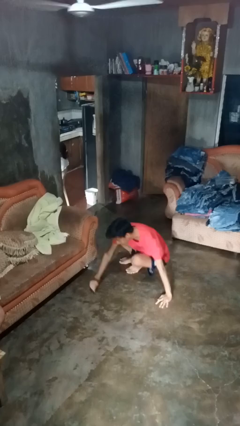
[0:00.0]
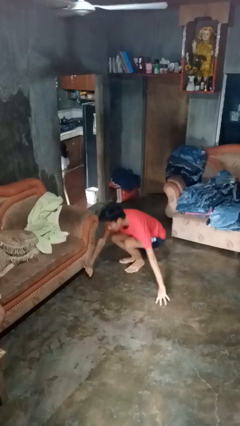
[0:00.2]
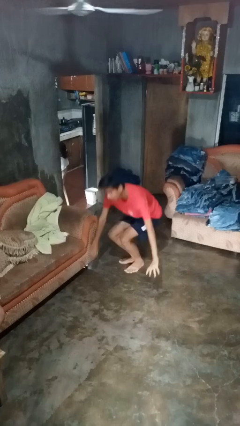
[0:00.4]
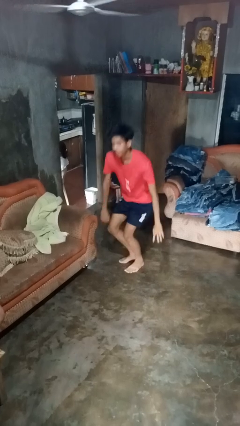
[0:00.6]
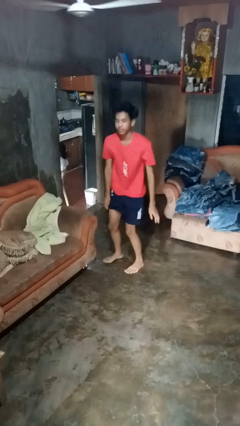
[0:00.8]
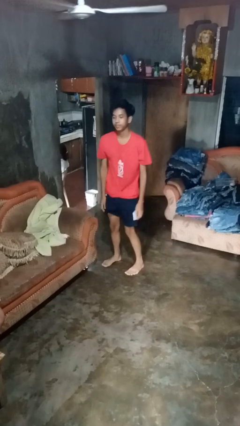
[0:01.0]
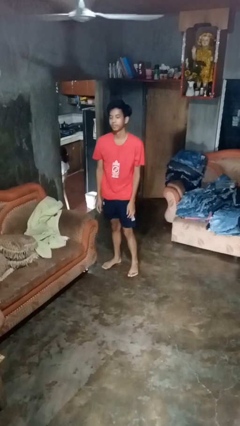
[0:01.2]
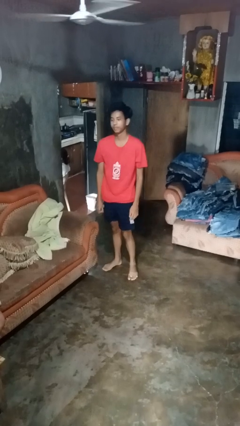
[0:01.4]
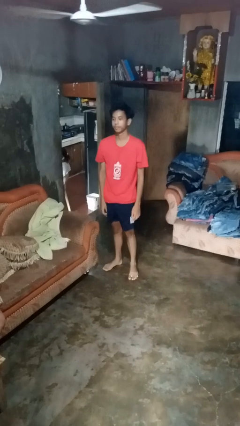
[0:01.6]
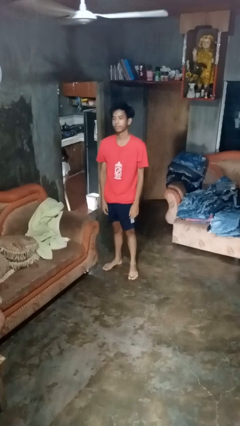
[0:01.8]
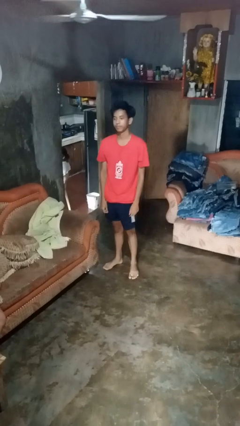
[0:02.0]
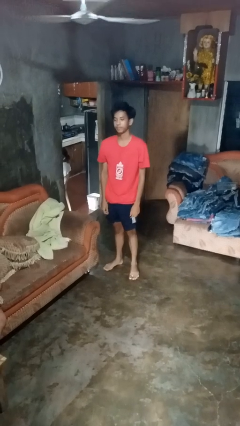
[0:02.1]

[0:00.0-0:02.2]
person stands up from floor

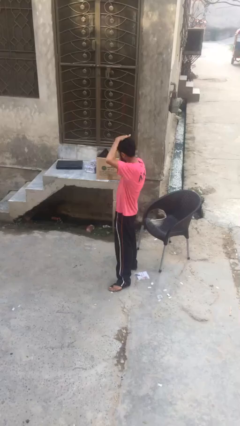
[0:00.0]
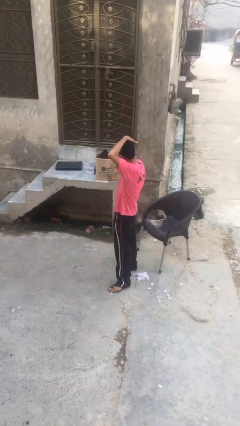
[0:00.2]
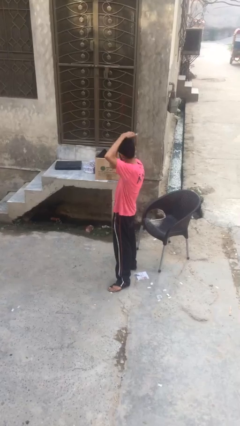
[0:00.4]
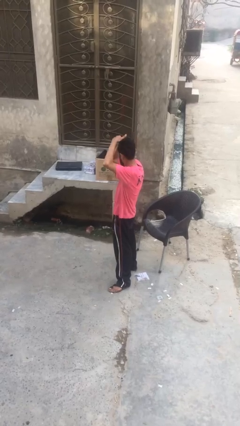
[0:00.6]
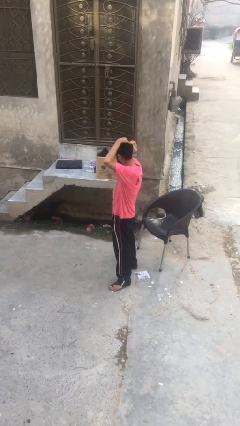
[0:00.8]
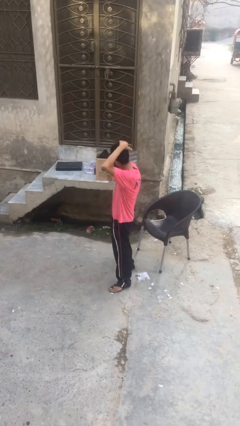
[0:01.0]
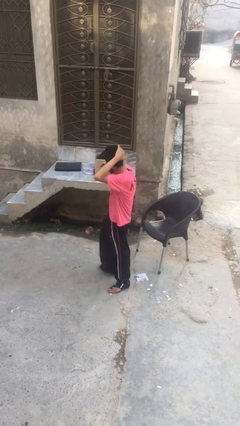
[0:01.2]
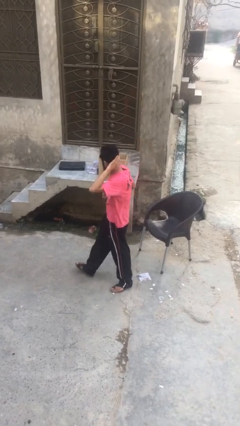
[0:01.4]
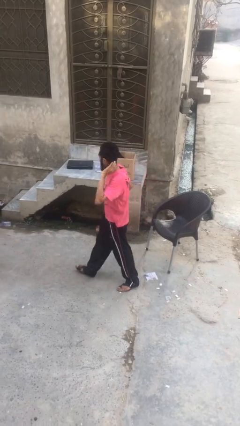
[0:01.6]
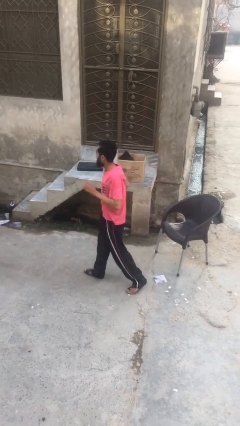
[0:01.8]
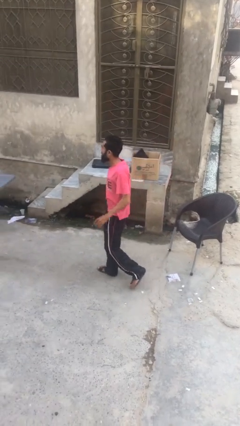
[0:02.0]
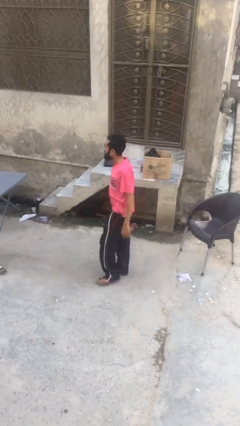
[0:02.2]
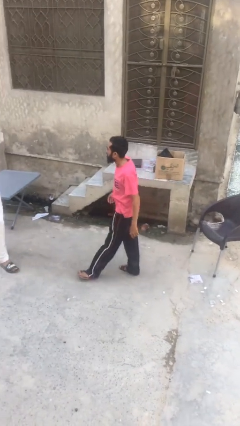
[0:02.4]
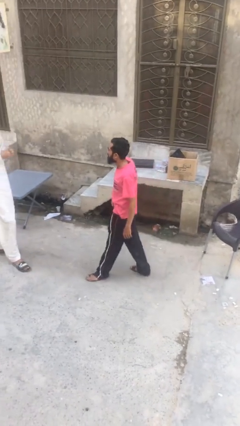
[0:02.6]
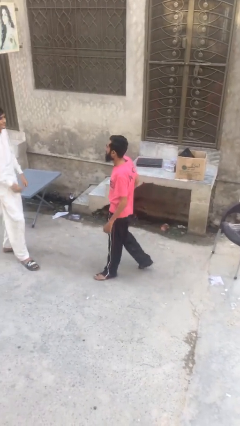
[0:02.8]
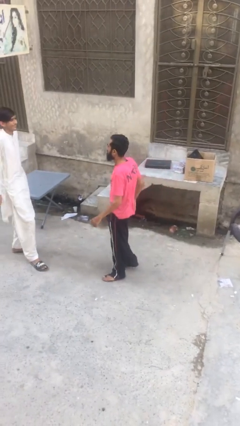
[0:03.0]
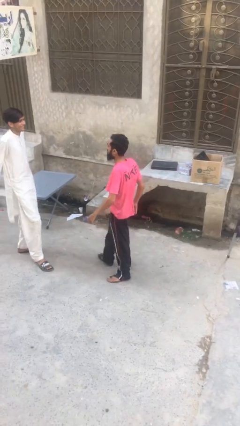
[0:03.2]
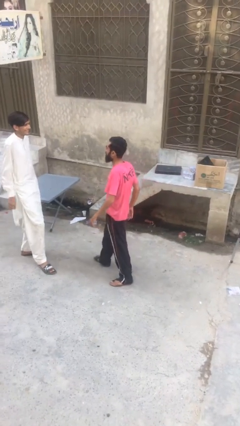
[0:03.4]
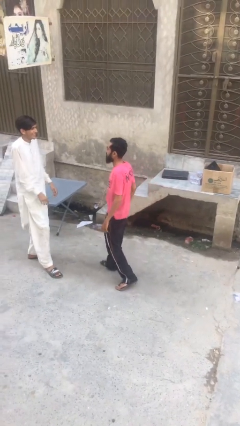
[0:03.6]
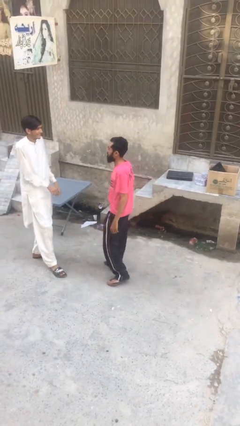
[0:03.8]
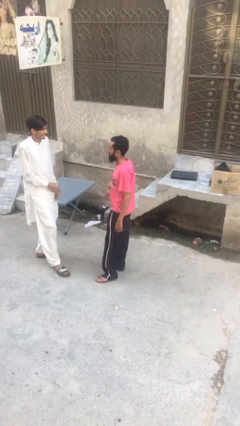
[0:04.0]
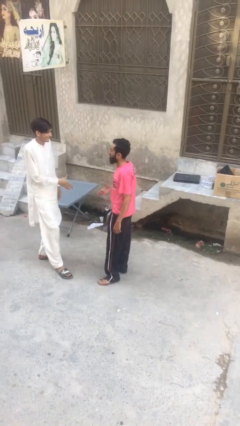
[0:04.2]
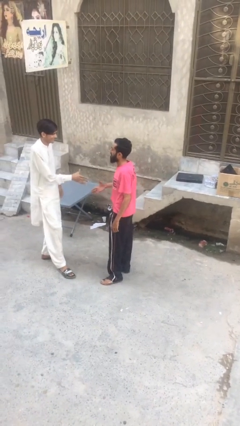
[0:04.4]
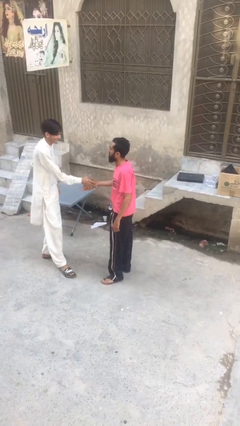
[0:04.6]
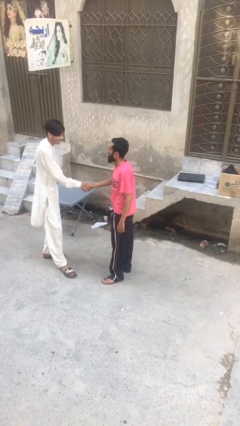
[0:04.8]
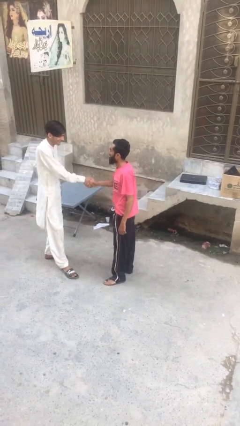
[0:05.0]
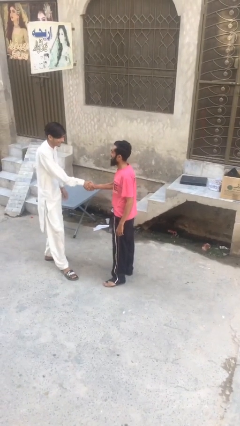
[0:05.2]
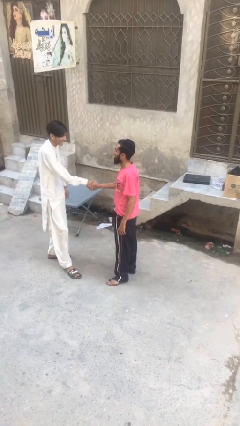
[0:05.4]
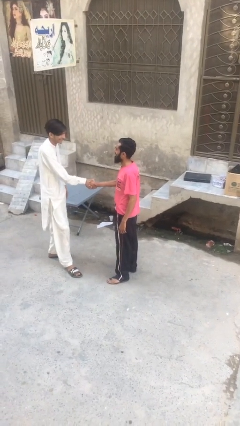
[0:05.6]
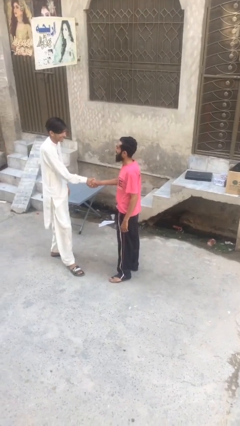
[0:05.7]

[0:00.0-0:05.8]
person shakes hand

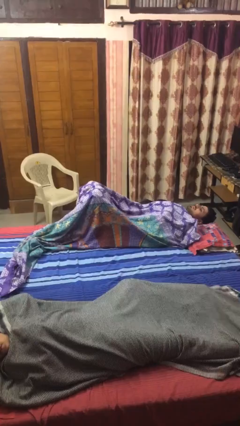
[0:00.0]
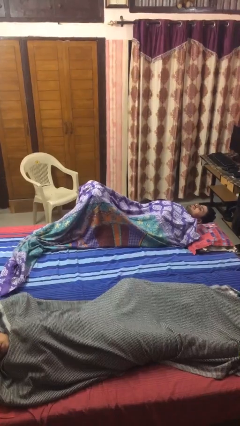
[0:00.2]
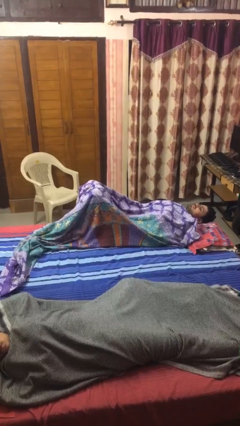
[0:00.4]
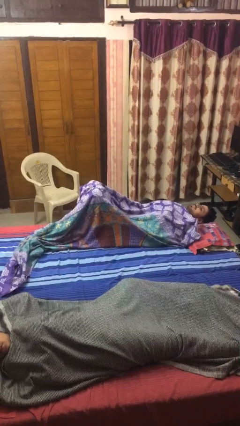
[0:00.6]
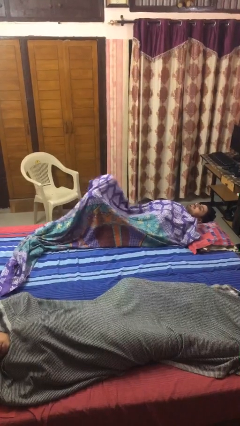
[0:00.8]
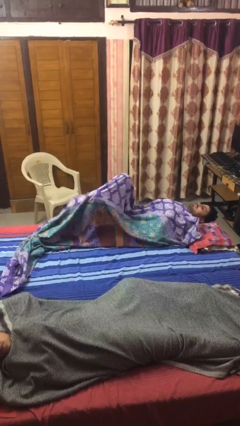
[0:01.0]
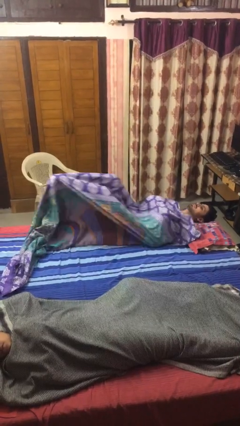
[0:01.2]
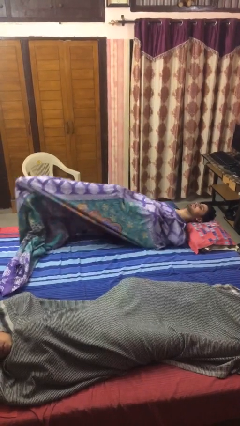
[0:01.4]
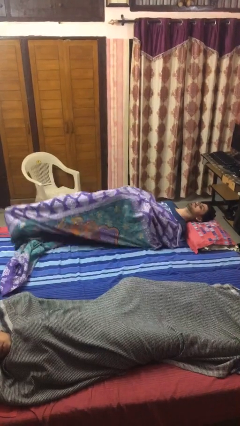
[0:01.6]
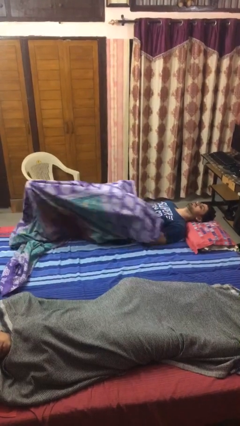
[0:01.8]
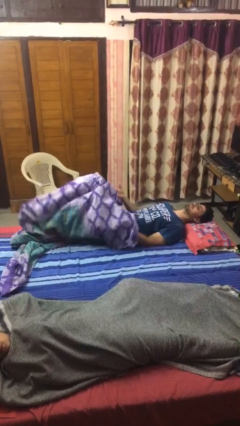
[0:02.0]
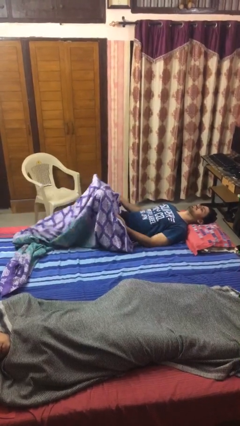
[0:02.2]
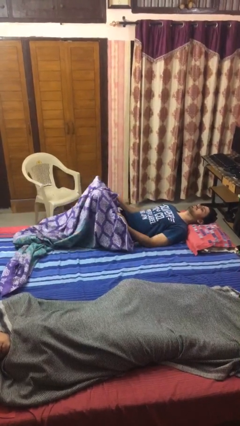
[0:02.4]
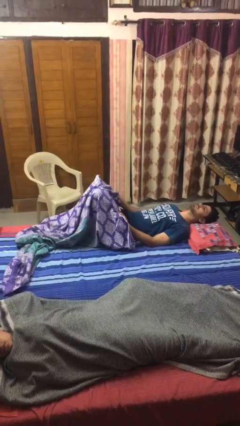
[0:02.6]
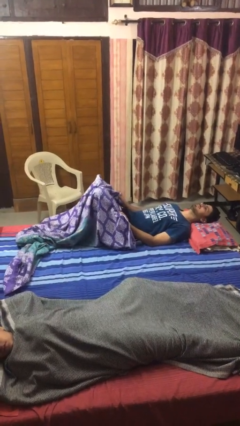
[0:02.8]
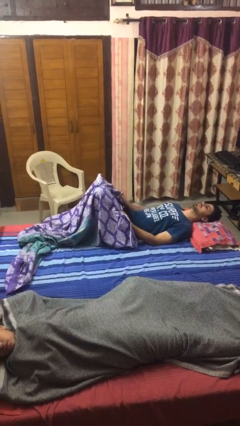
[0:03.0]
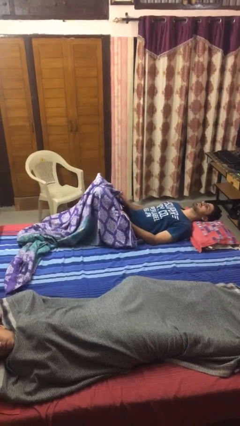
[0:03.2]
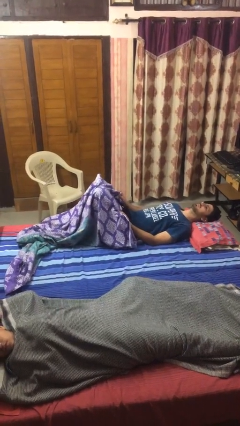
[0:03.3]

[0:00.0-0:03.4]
person uncovers with bedsheets

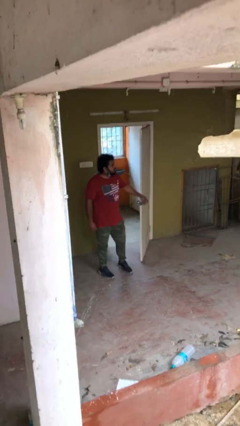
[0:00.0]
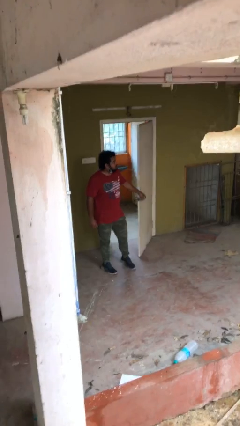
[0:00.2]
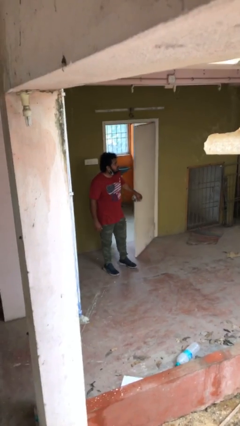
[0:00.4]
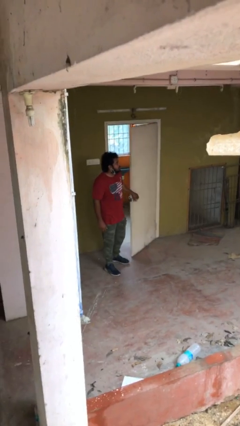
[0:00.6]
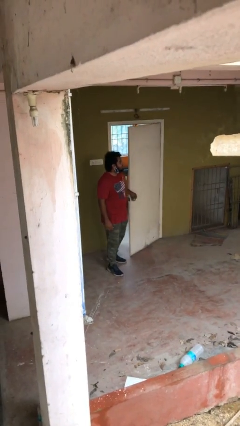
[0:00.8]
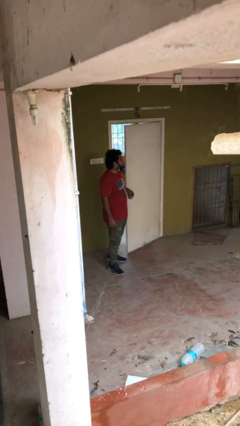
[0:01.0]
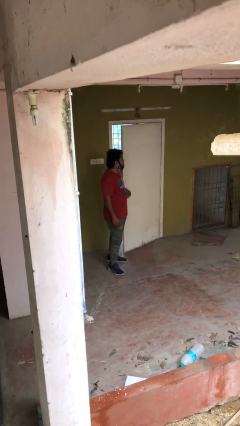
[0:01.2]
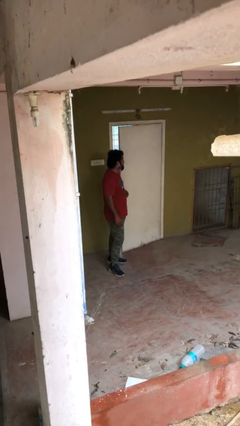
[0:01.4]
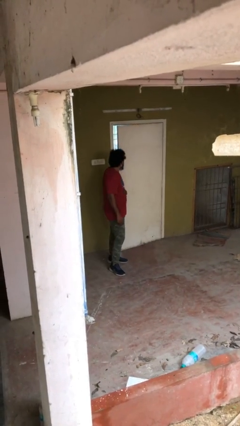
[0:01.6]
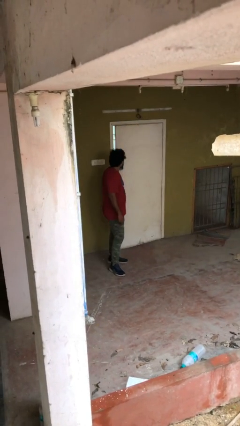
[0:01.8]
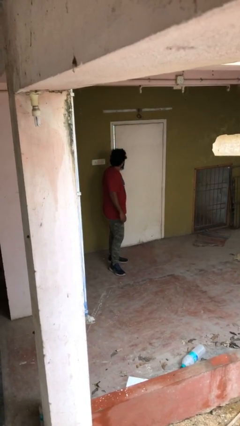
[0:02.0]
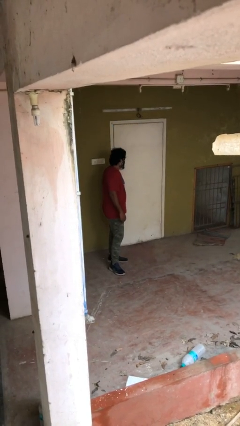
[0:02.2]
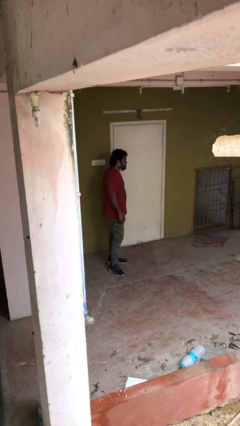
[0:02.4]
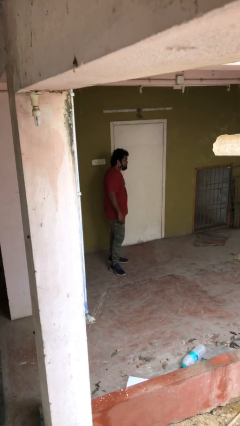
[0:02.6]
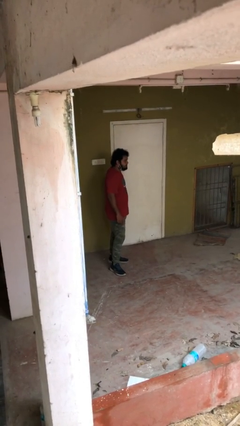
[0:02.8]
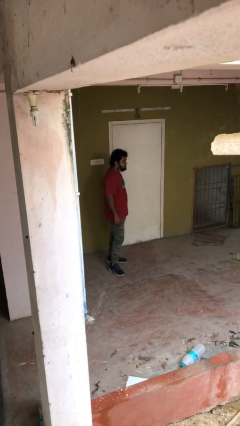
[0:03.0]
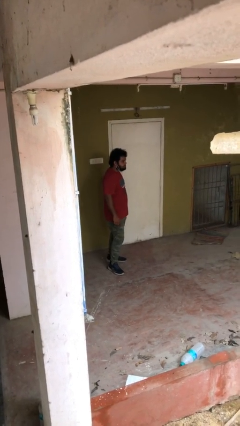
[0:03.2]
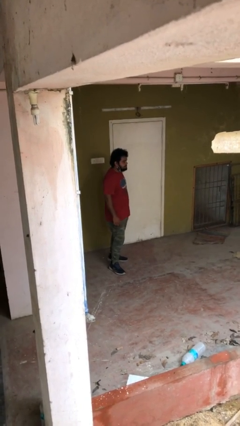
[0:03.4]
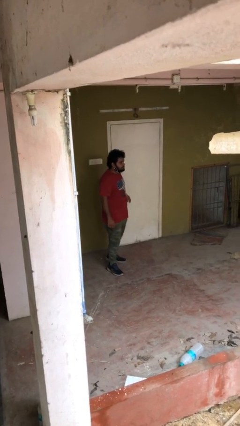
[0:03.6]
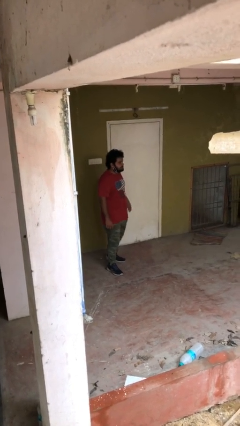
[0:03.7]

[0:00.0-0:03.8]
person closes facility door

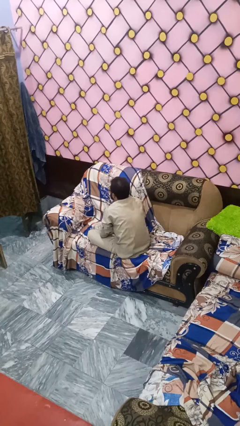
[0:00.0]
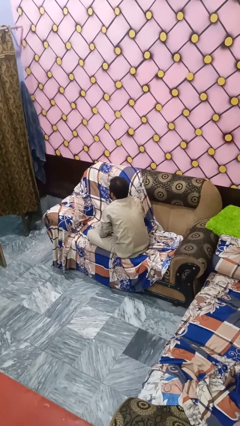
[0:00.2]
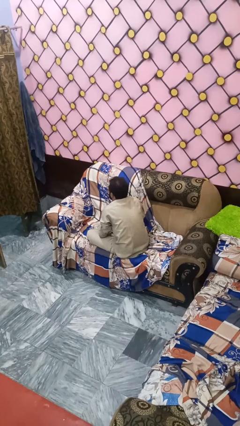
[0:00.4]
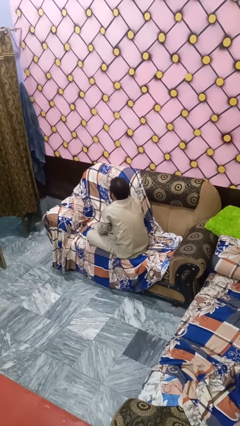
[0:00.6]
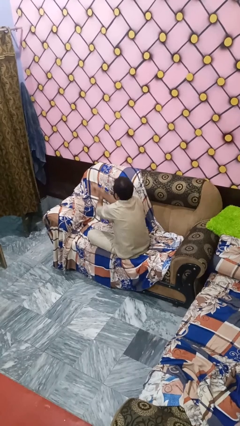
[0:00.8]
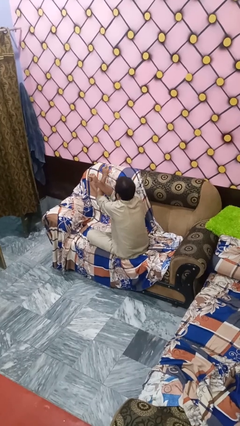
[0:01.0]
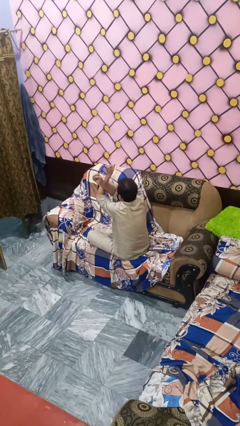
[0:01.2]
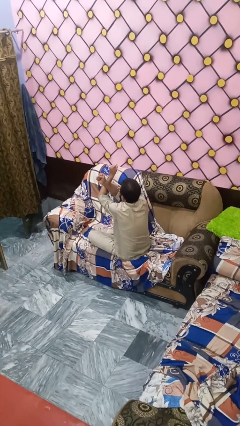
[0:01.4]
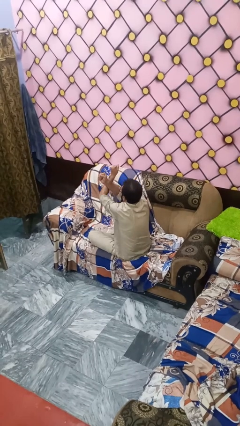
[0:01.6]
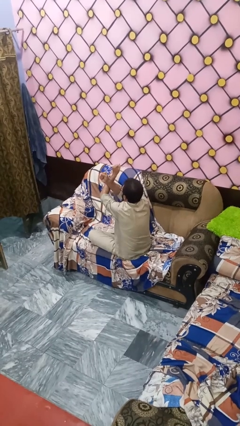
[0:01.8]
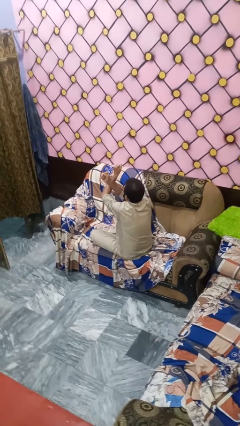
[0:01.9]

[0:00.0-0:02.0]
person gestures arms x

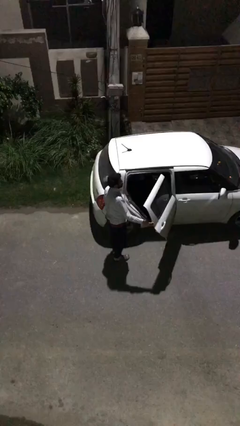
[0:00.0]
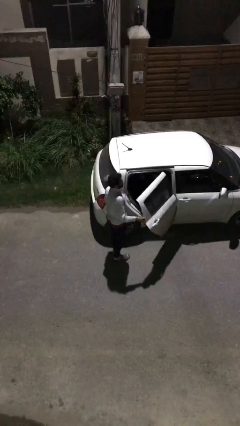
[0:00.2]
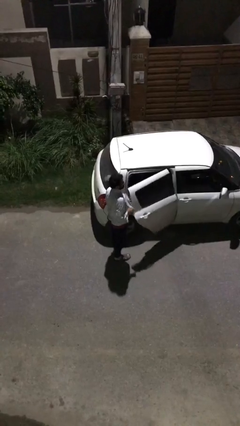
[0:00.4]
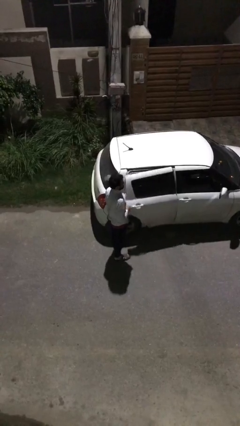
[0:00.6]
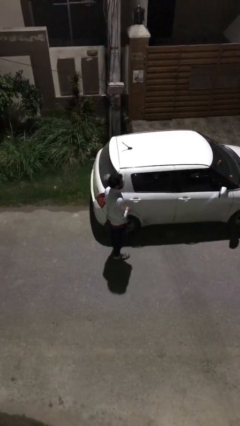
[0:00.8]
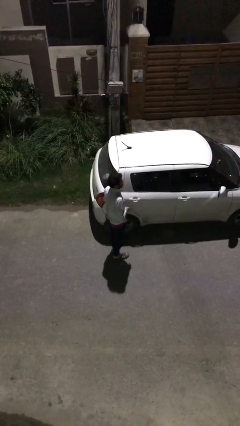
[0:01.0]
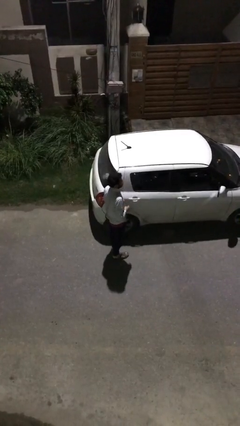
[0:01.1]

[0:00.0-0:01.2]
person closes car door
